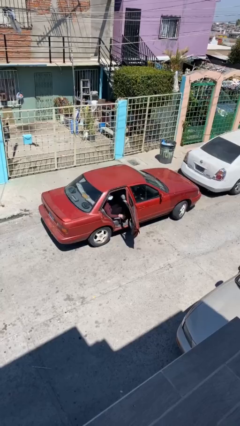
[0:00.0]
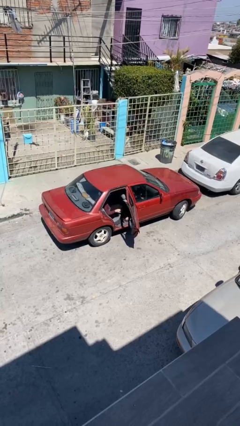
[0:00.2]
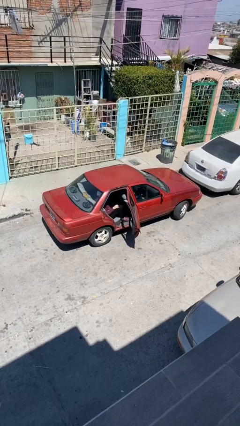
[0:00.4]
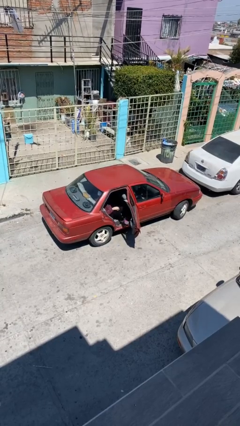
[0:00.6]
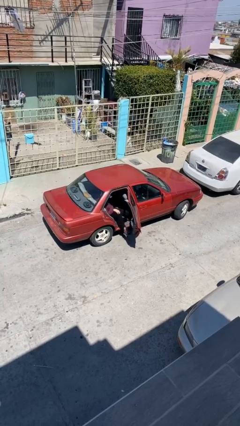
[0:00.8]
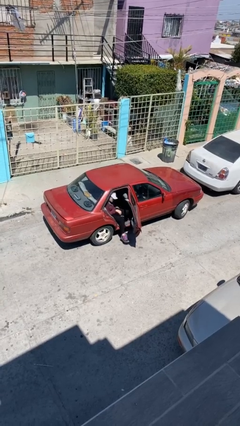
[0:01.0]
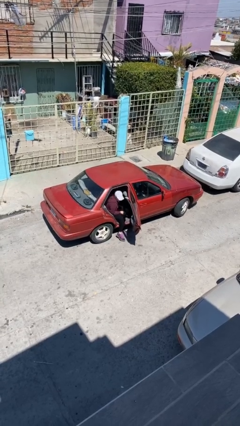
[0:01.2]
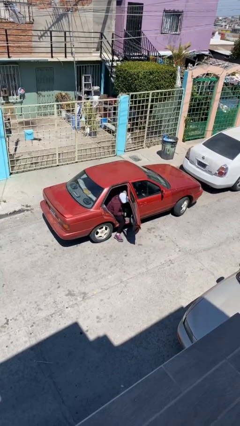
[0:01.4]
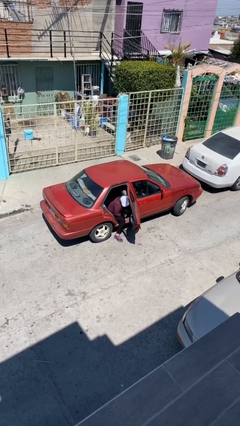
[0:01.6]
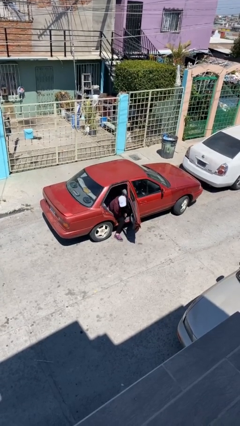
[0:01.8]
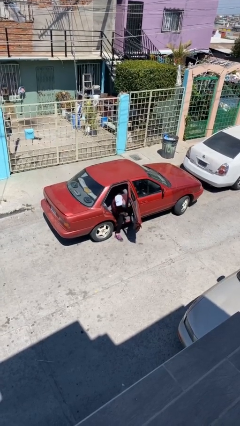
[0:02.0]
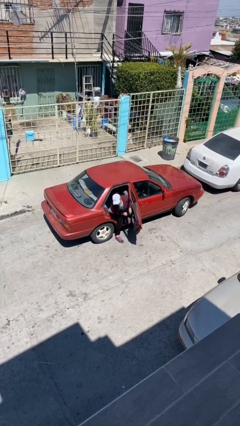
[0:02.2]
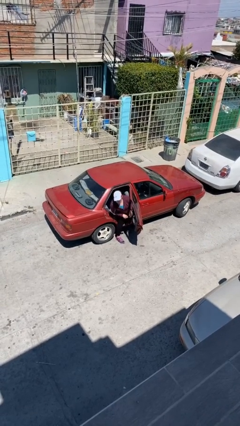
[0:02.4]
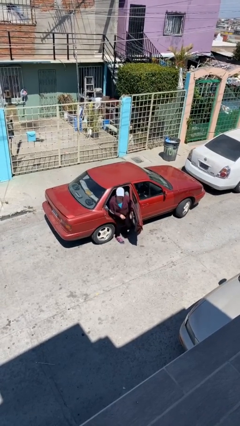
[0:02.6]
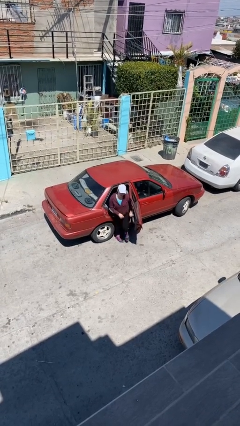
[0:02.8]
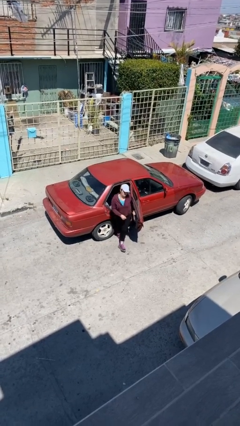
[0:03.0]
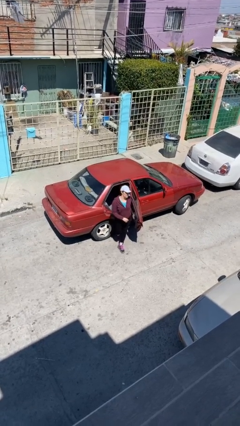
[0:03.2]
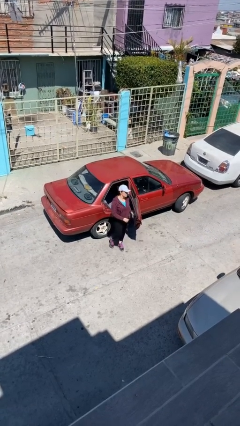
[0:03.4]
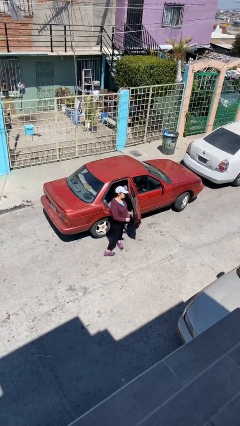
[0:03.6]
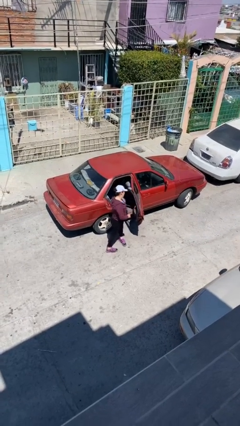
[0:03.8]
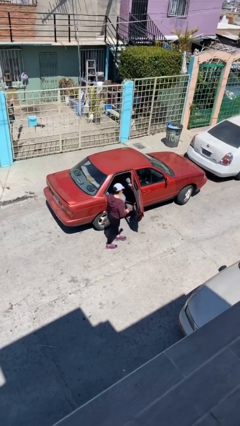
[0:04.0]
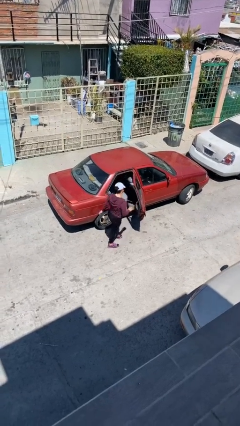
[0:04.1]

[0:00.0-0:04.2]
person exits car

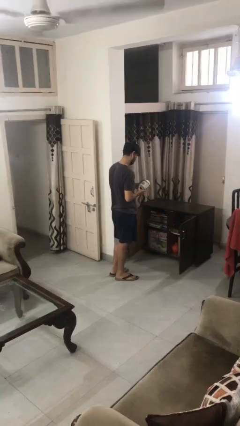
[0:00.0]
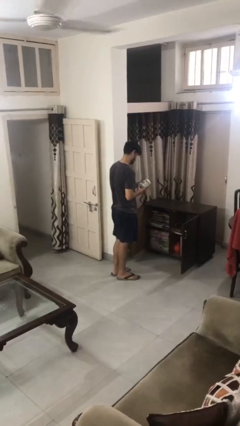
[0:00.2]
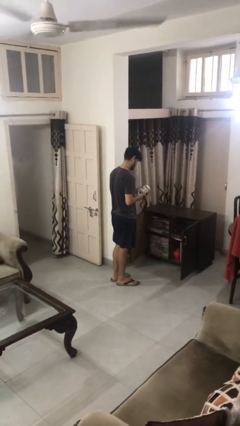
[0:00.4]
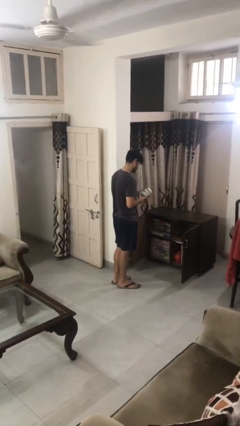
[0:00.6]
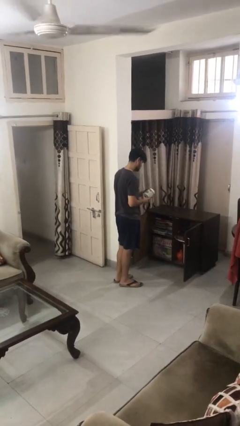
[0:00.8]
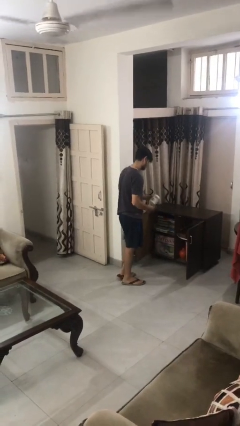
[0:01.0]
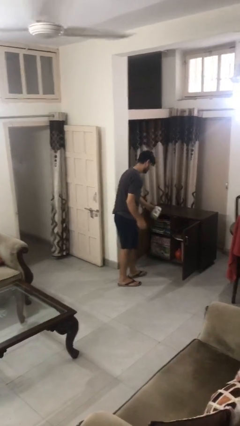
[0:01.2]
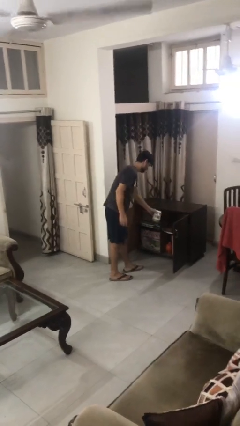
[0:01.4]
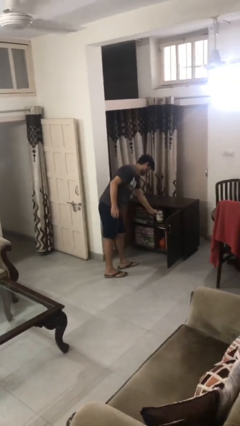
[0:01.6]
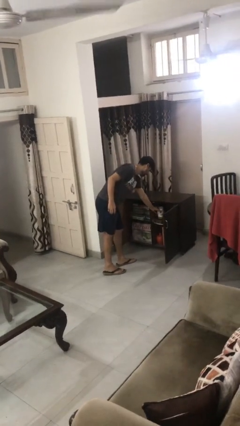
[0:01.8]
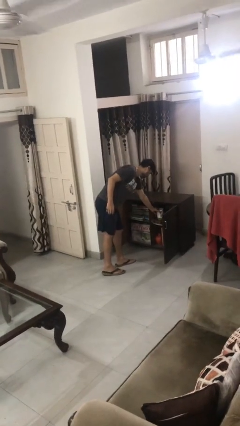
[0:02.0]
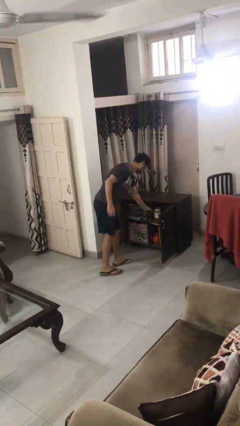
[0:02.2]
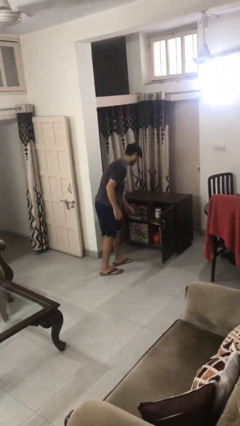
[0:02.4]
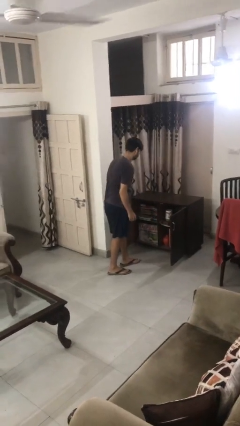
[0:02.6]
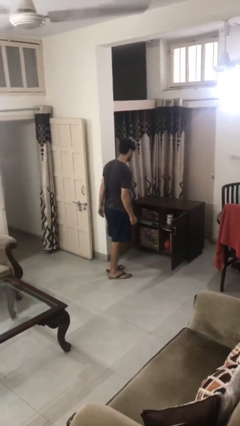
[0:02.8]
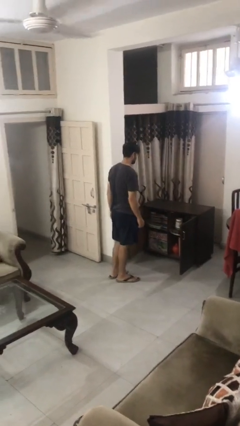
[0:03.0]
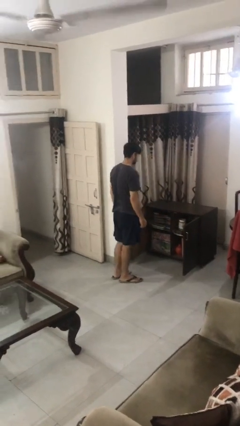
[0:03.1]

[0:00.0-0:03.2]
person puts down object into cabinet

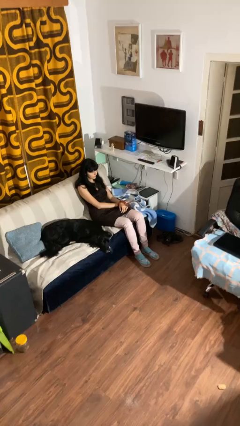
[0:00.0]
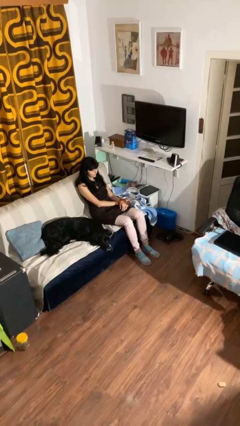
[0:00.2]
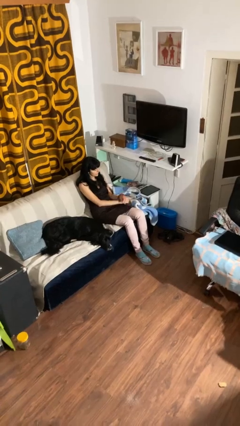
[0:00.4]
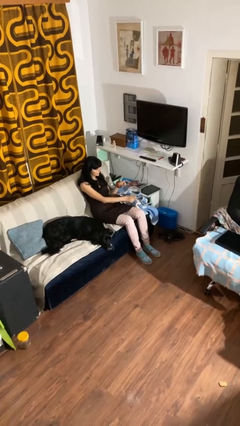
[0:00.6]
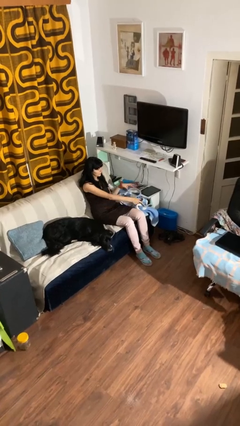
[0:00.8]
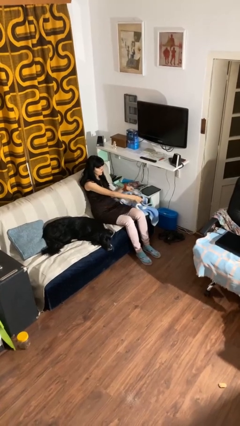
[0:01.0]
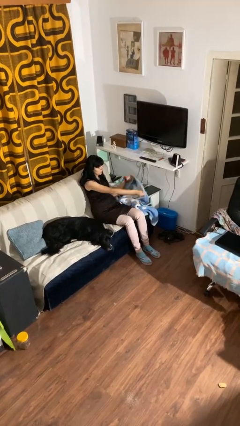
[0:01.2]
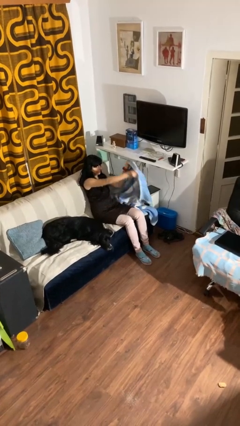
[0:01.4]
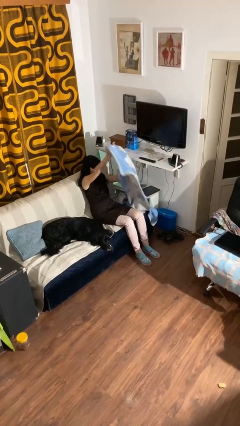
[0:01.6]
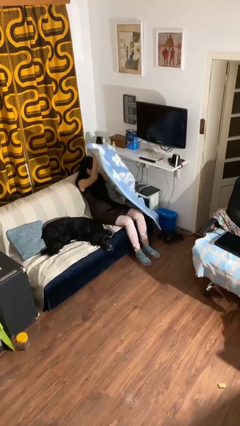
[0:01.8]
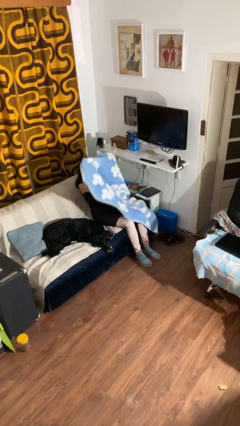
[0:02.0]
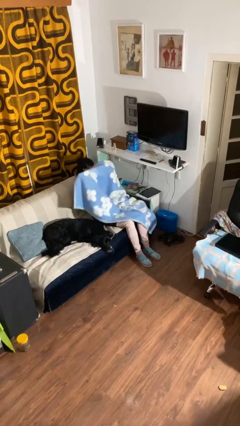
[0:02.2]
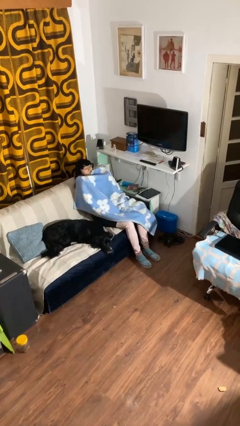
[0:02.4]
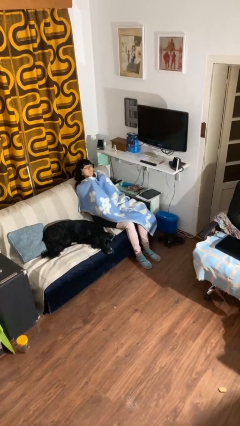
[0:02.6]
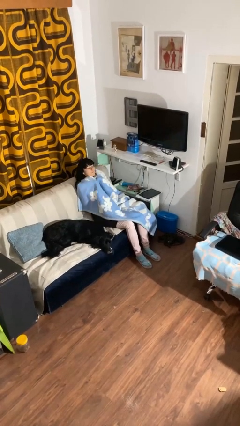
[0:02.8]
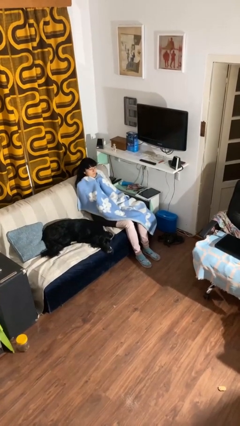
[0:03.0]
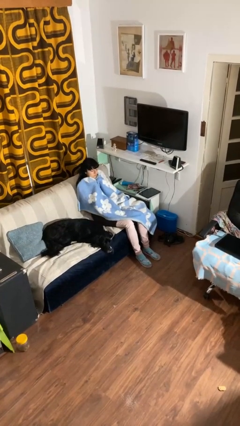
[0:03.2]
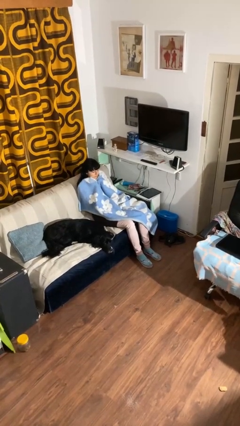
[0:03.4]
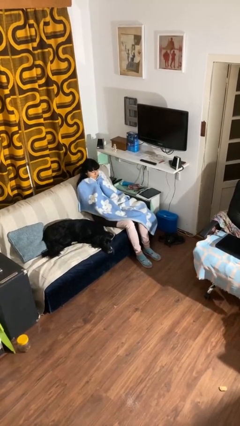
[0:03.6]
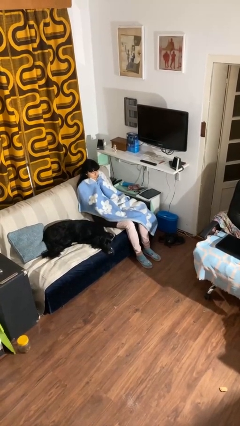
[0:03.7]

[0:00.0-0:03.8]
person covers with blanket

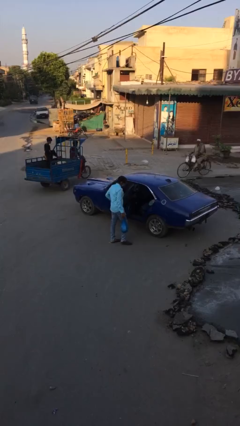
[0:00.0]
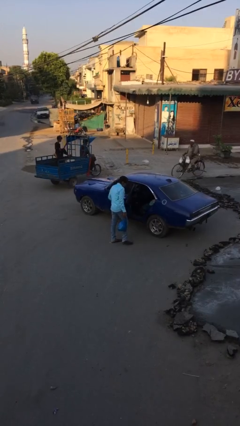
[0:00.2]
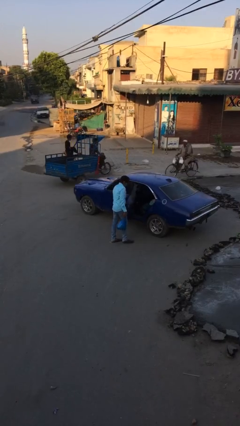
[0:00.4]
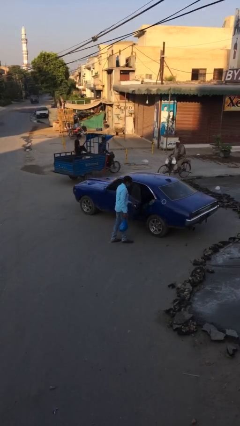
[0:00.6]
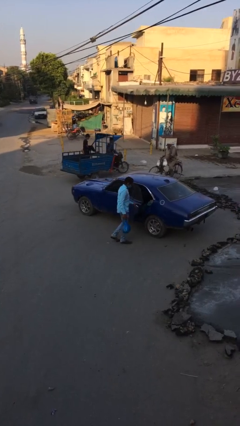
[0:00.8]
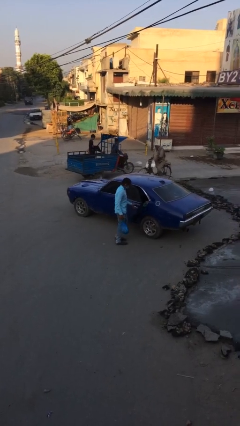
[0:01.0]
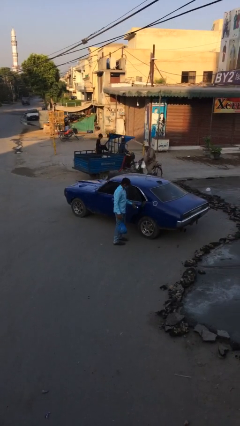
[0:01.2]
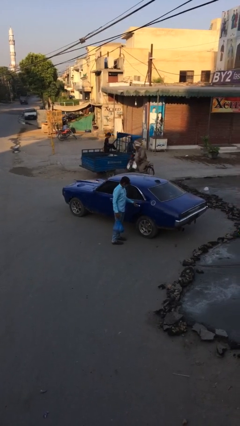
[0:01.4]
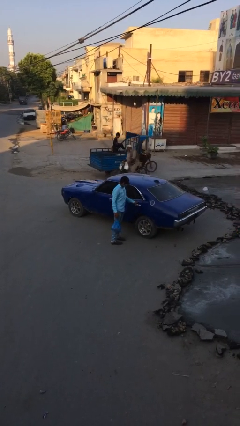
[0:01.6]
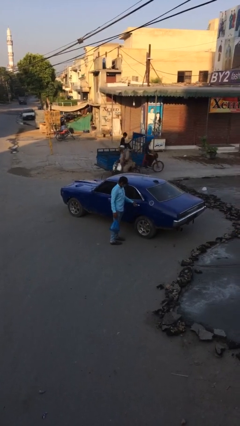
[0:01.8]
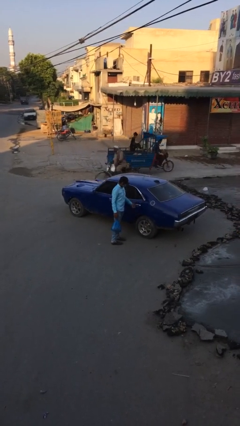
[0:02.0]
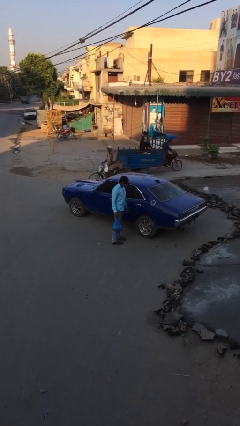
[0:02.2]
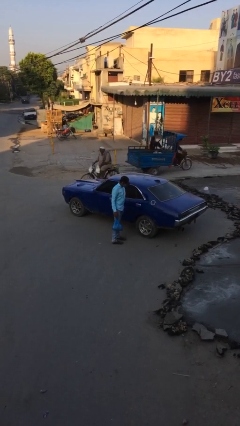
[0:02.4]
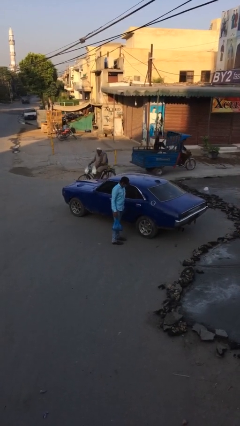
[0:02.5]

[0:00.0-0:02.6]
person closes car door

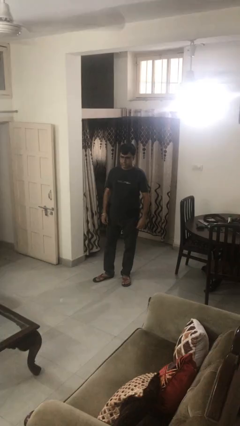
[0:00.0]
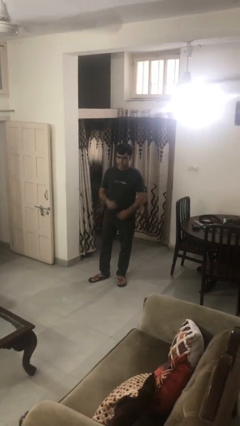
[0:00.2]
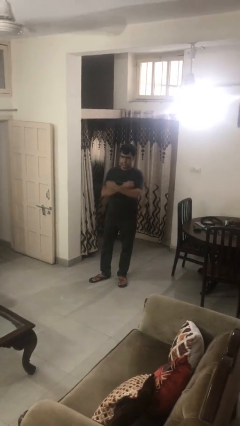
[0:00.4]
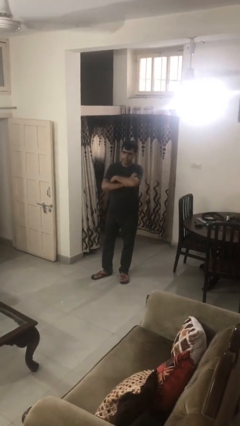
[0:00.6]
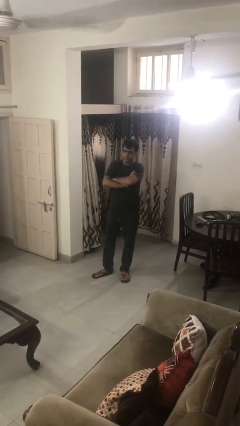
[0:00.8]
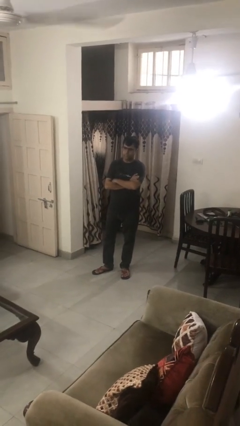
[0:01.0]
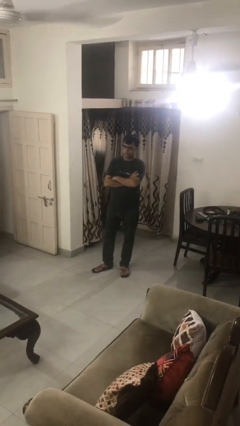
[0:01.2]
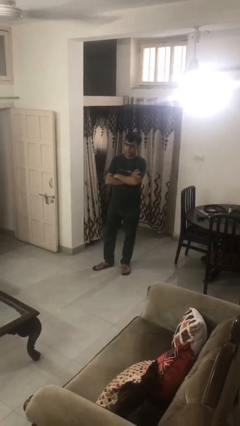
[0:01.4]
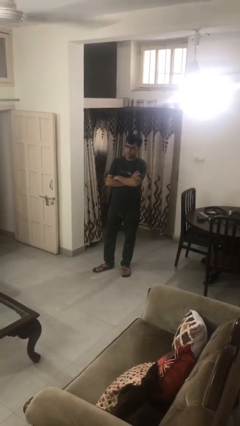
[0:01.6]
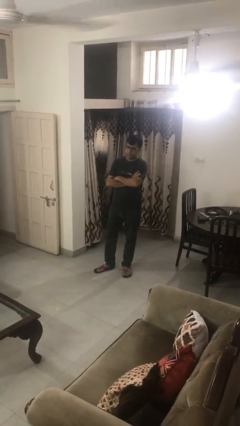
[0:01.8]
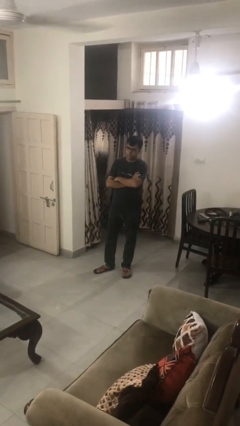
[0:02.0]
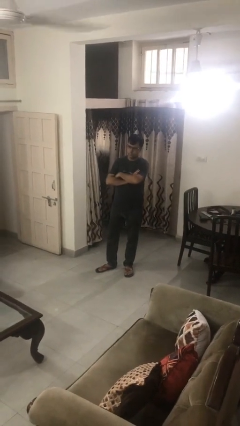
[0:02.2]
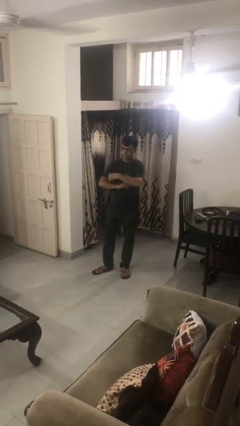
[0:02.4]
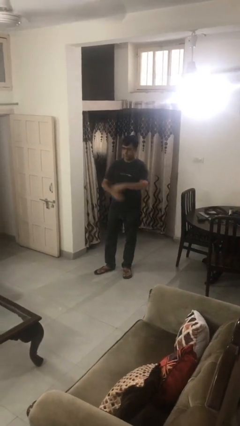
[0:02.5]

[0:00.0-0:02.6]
person crosses arms

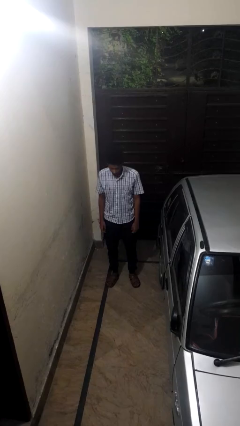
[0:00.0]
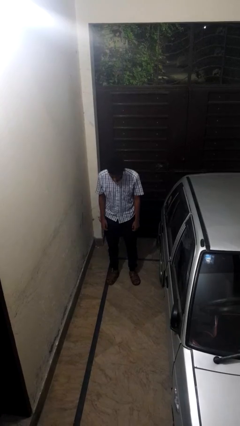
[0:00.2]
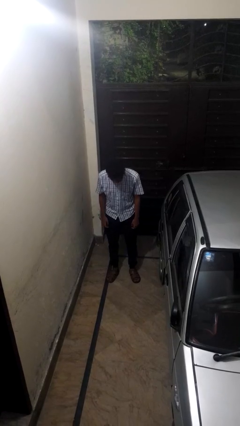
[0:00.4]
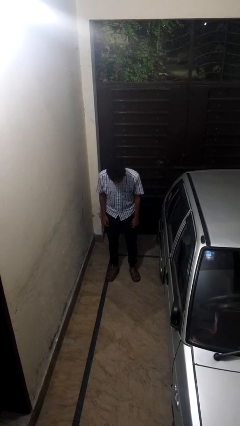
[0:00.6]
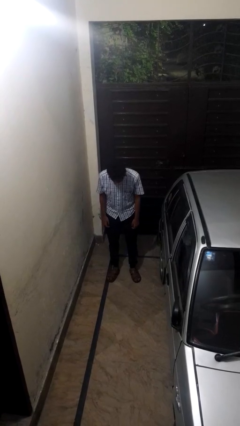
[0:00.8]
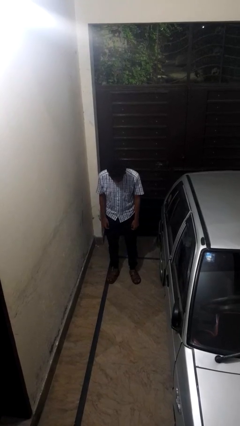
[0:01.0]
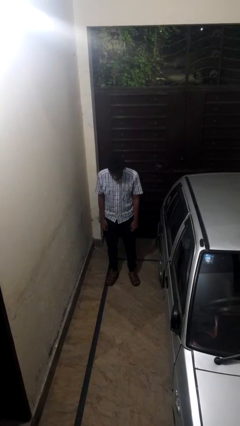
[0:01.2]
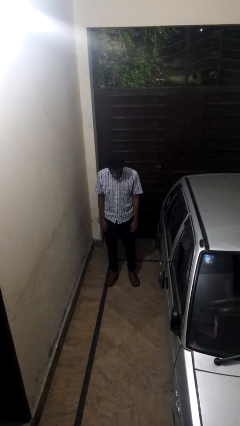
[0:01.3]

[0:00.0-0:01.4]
person bows
